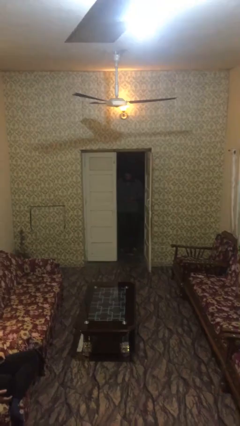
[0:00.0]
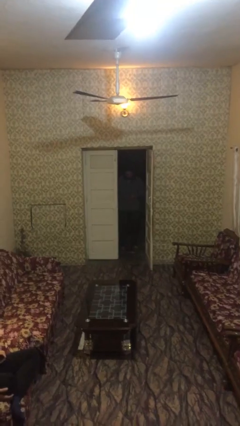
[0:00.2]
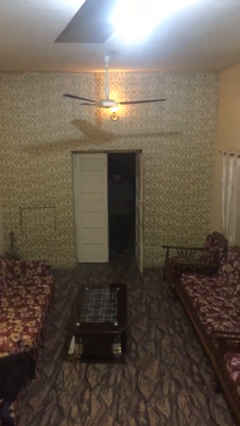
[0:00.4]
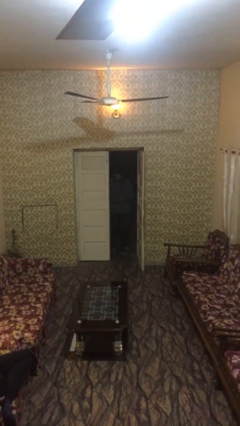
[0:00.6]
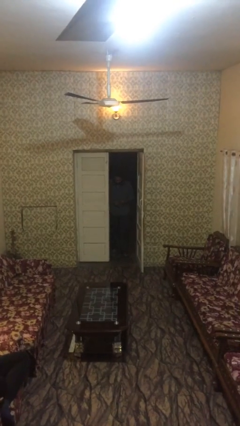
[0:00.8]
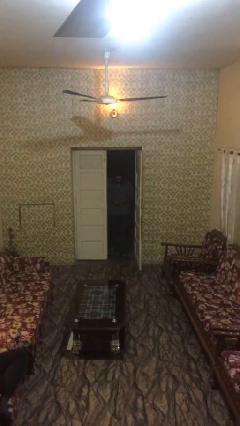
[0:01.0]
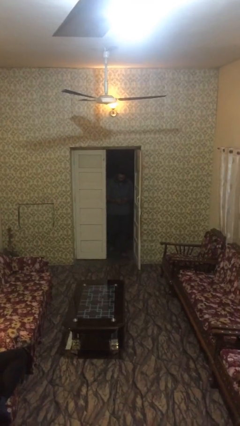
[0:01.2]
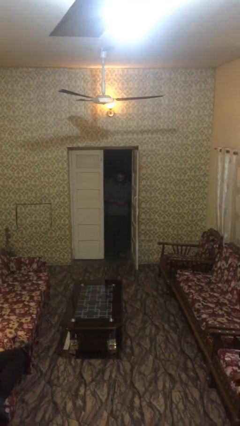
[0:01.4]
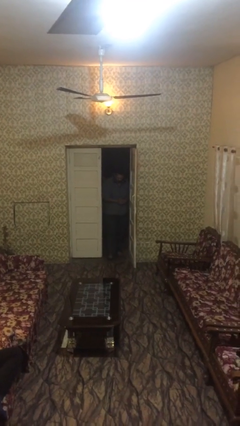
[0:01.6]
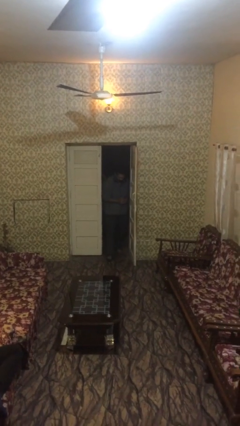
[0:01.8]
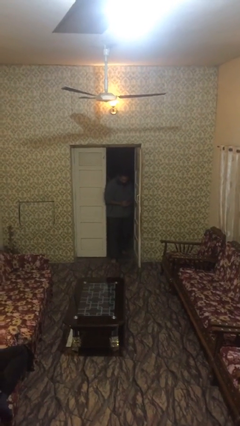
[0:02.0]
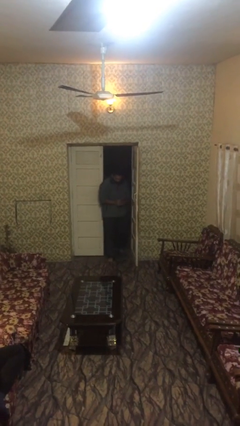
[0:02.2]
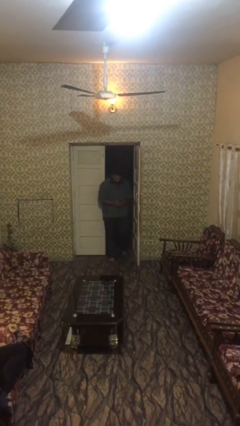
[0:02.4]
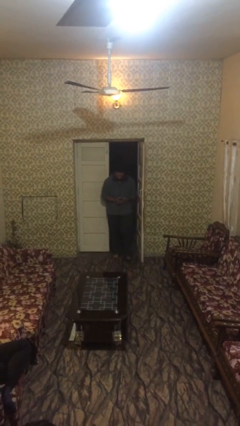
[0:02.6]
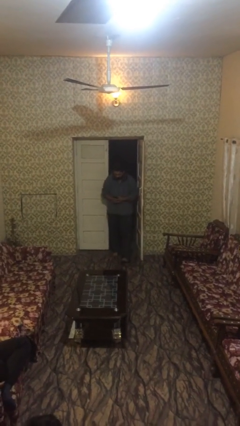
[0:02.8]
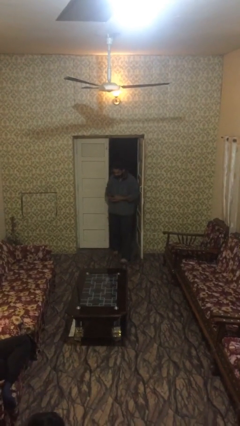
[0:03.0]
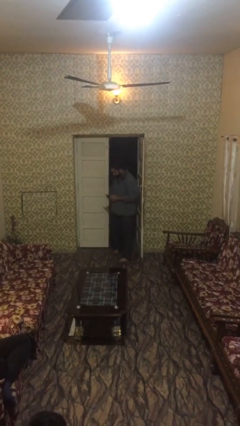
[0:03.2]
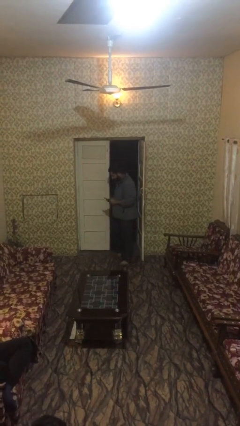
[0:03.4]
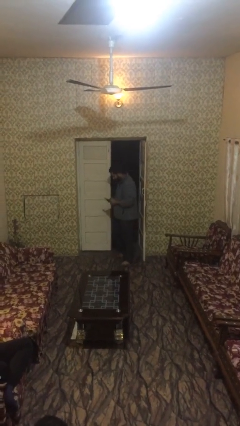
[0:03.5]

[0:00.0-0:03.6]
person enters scene through structure

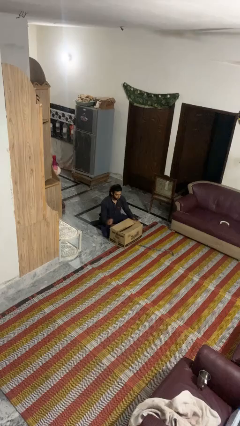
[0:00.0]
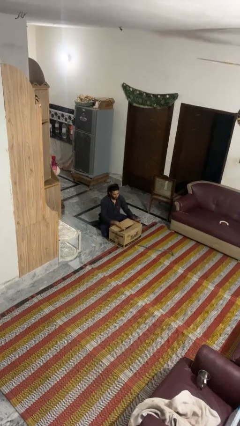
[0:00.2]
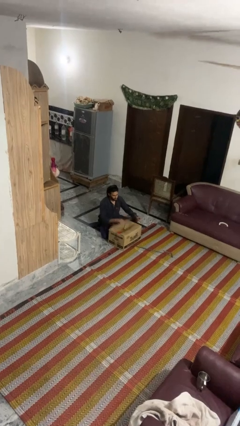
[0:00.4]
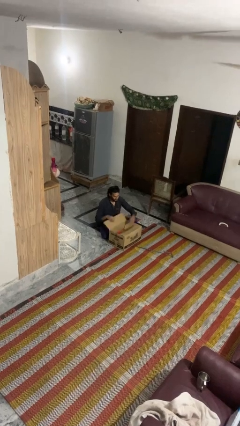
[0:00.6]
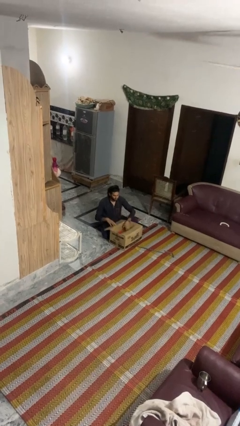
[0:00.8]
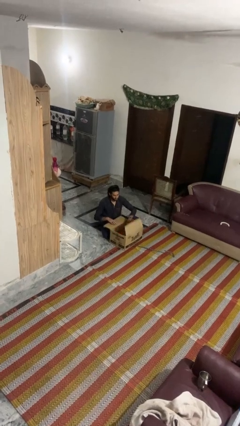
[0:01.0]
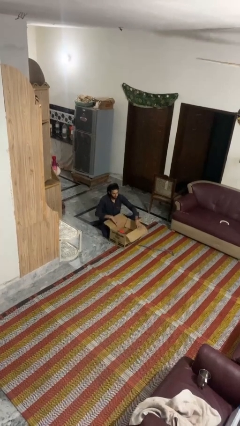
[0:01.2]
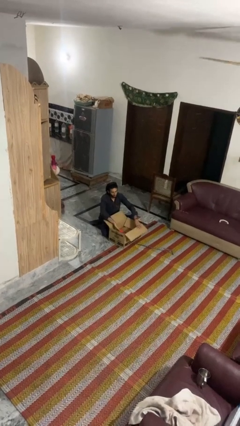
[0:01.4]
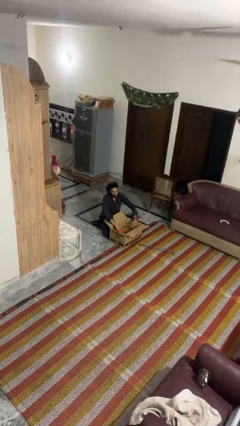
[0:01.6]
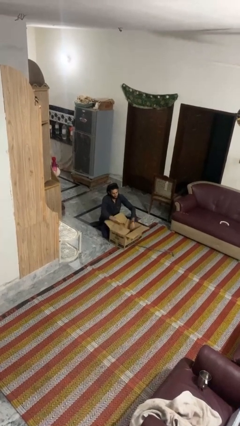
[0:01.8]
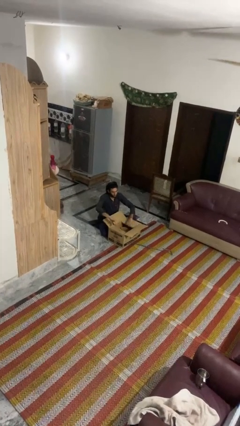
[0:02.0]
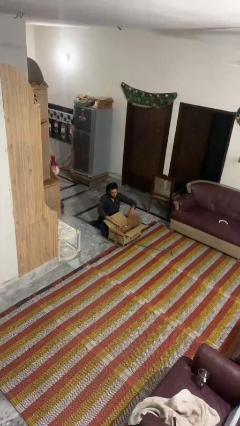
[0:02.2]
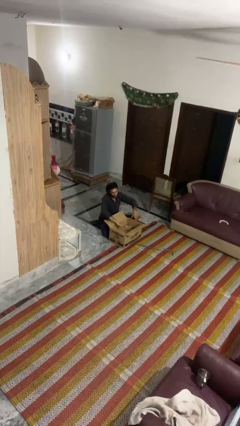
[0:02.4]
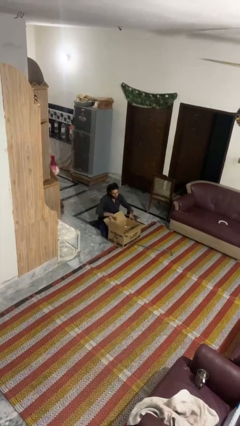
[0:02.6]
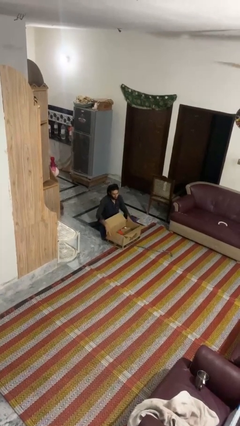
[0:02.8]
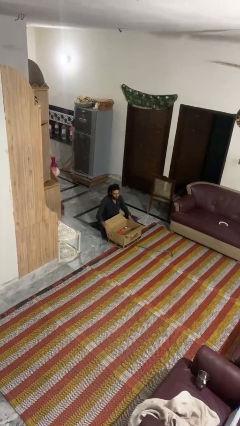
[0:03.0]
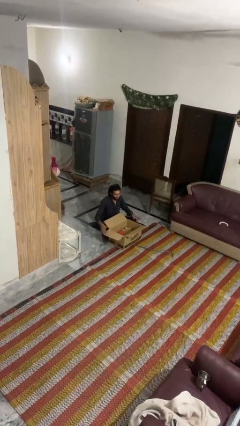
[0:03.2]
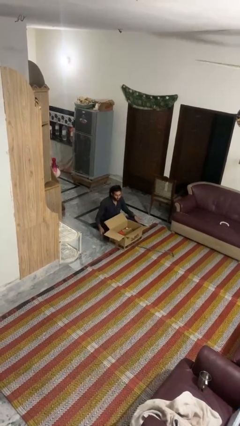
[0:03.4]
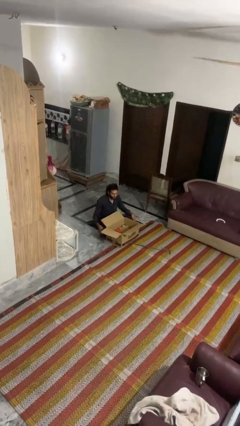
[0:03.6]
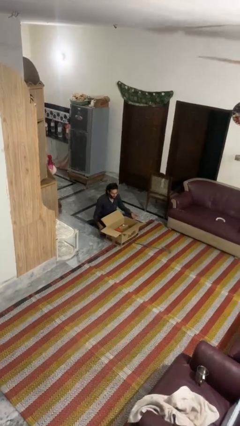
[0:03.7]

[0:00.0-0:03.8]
person opens box

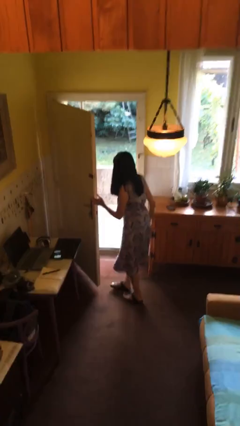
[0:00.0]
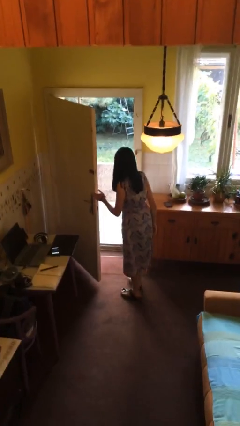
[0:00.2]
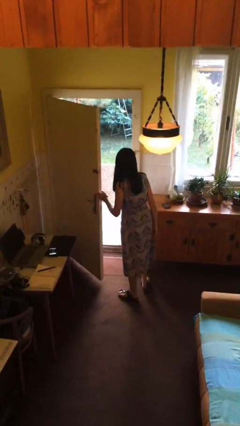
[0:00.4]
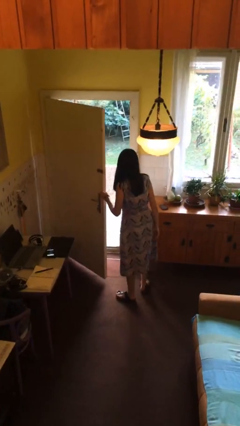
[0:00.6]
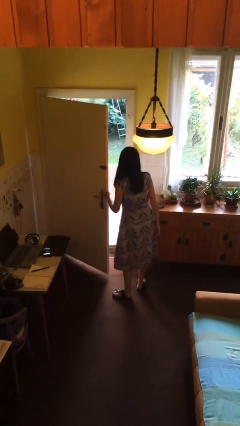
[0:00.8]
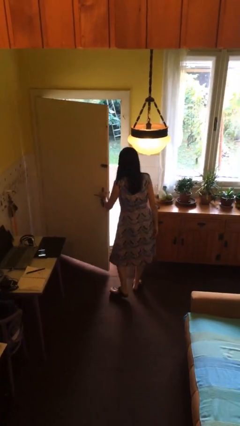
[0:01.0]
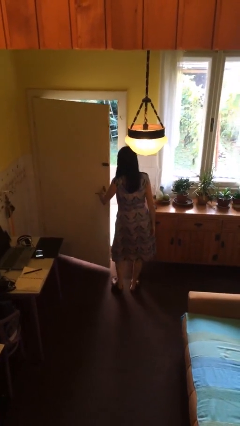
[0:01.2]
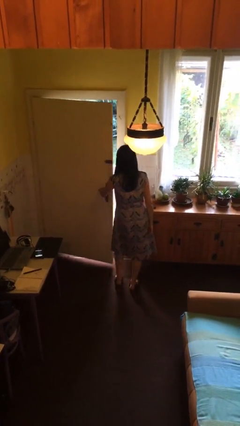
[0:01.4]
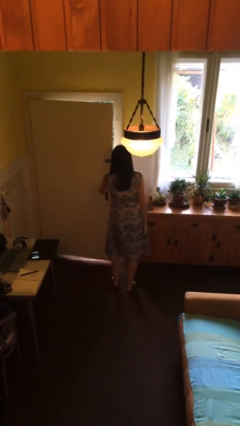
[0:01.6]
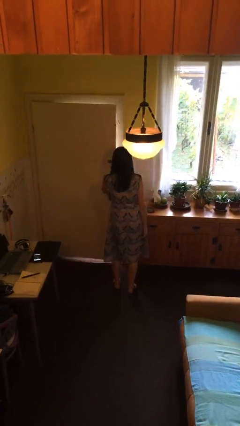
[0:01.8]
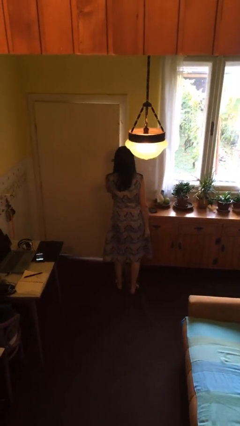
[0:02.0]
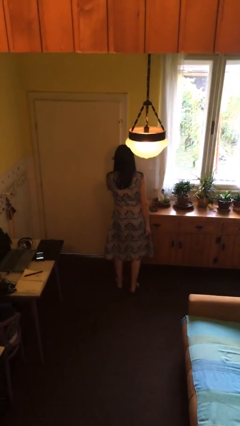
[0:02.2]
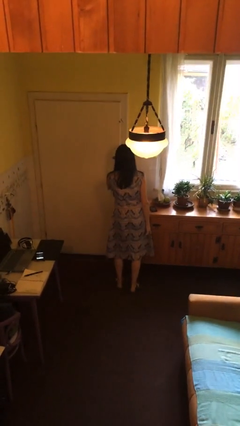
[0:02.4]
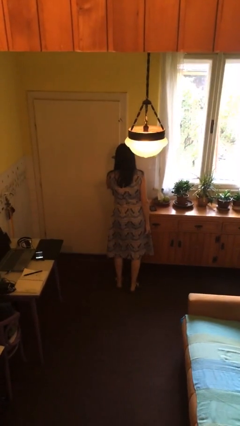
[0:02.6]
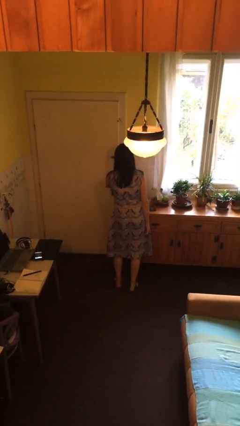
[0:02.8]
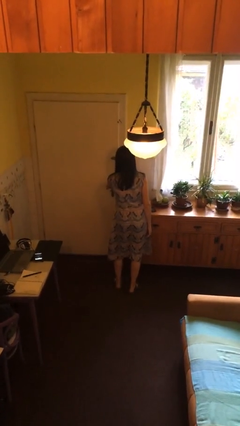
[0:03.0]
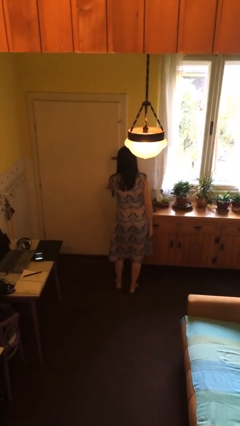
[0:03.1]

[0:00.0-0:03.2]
person closes facility door

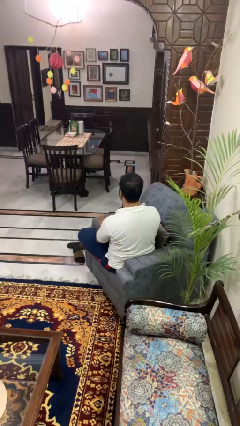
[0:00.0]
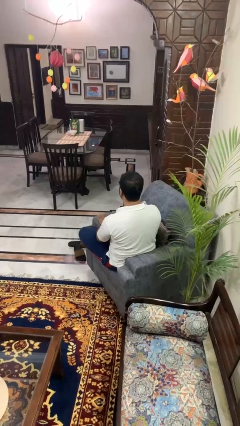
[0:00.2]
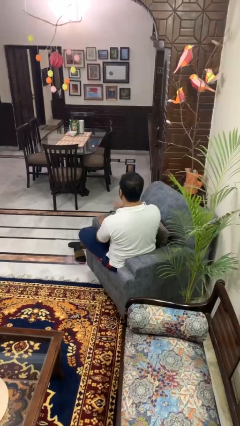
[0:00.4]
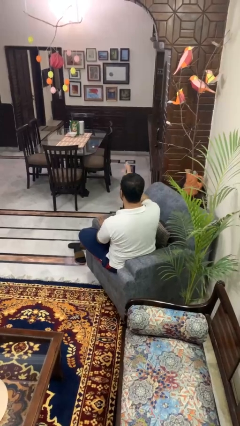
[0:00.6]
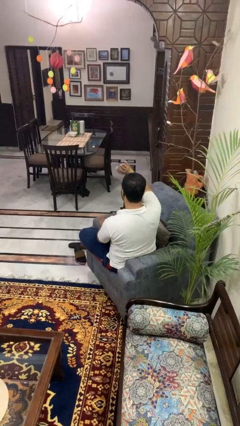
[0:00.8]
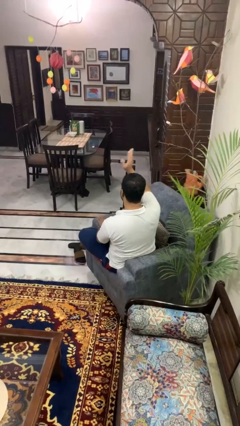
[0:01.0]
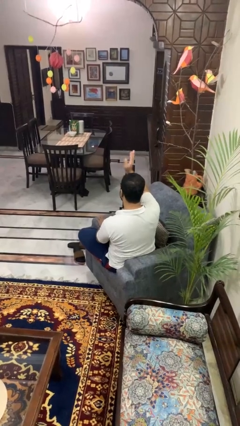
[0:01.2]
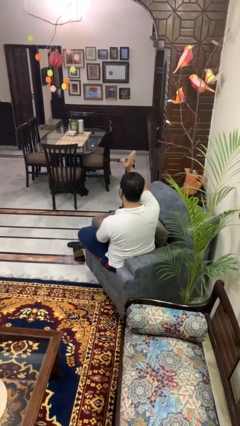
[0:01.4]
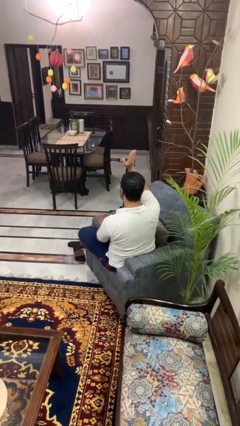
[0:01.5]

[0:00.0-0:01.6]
person waves at person

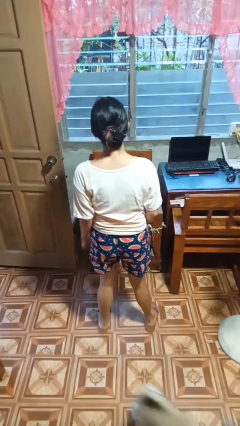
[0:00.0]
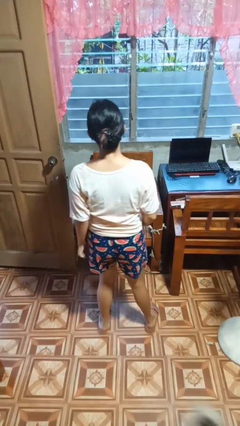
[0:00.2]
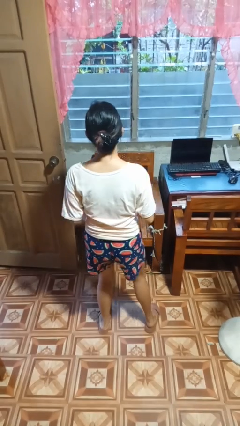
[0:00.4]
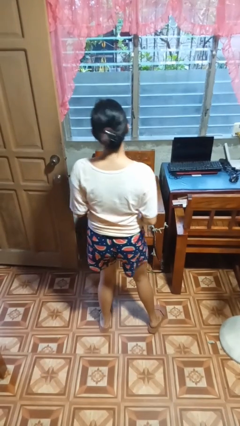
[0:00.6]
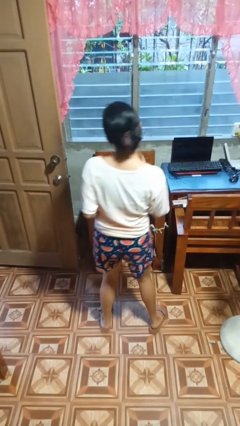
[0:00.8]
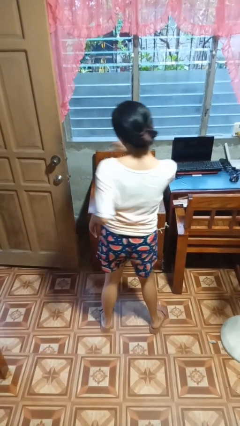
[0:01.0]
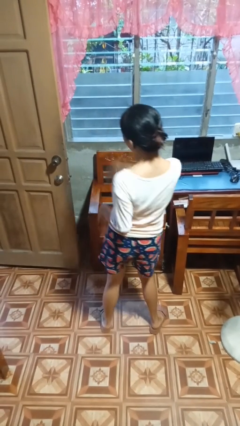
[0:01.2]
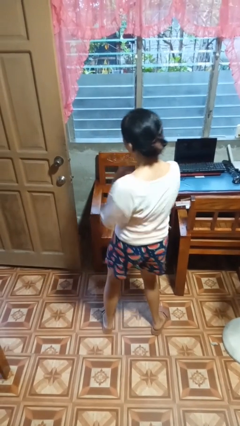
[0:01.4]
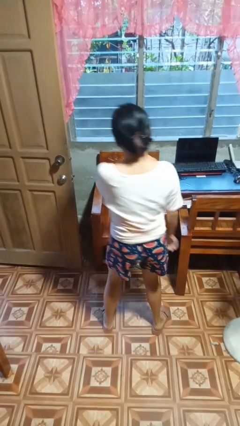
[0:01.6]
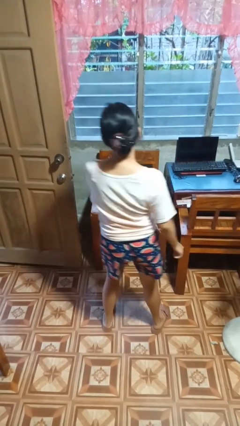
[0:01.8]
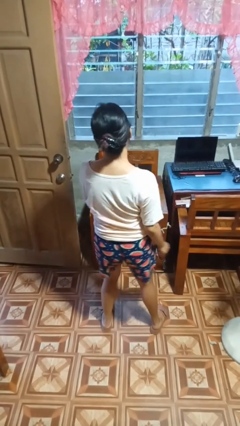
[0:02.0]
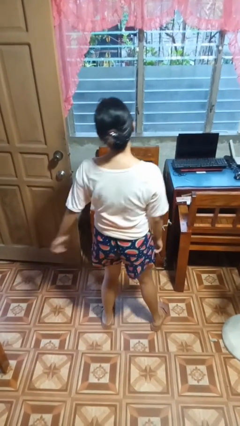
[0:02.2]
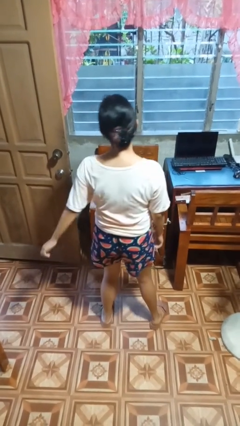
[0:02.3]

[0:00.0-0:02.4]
person dances in place

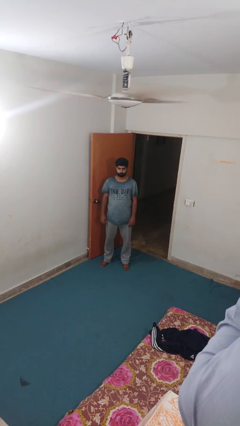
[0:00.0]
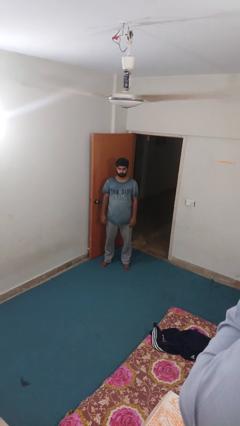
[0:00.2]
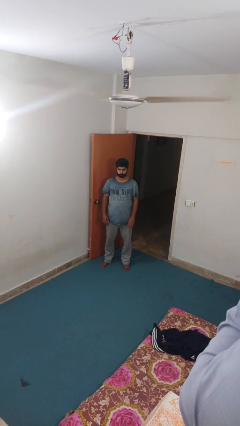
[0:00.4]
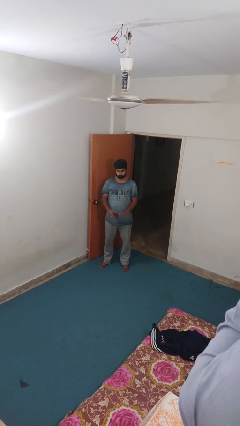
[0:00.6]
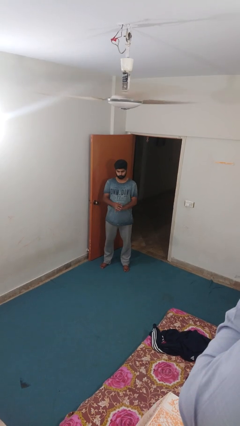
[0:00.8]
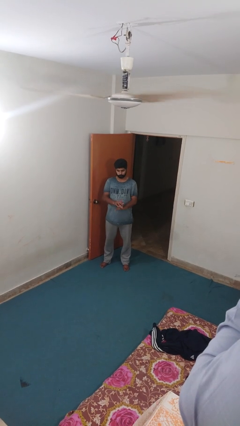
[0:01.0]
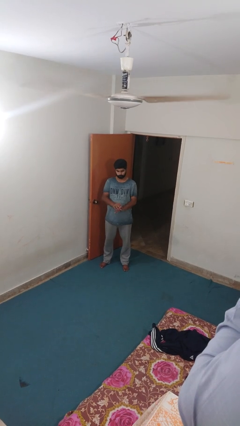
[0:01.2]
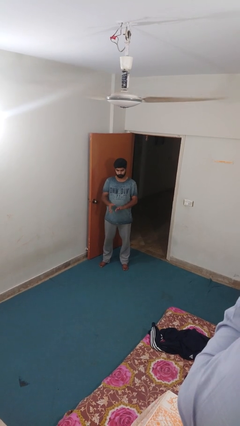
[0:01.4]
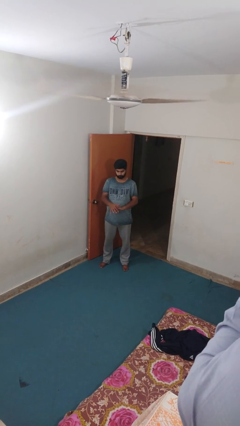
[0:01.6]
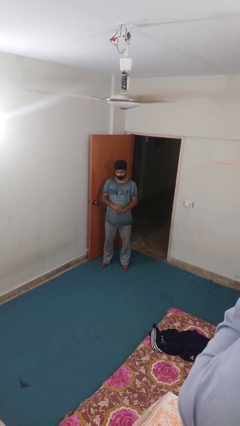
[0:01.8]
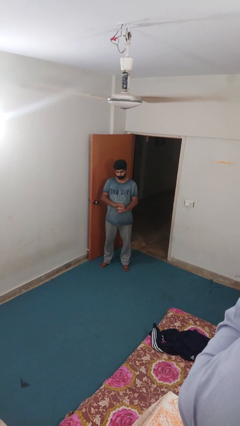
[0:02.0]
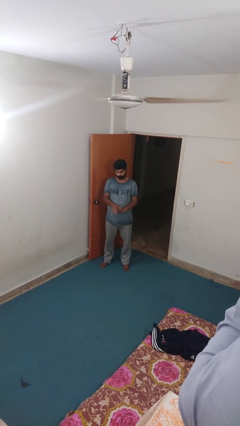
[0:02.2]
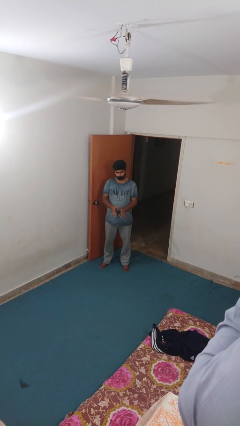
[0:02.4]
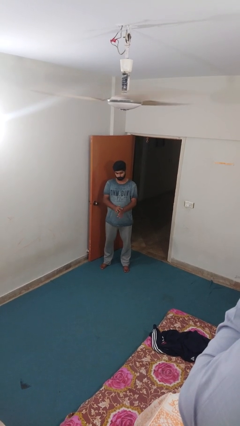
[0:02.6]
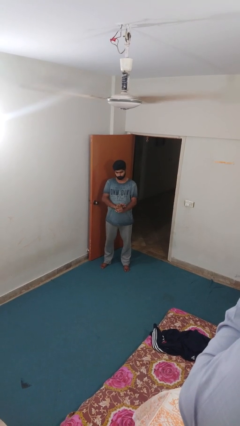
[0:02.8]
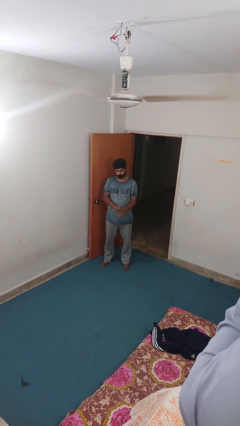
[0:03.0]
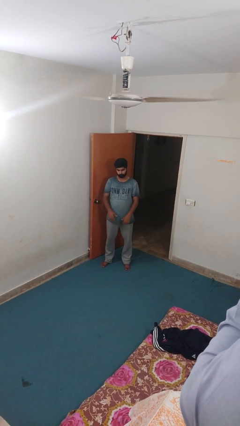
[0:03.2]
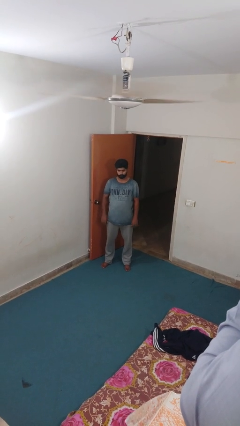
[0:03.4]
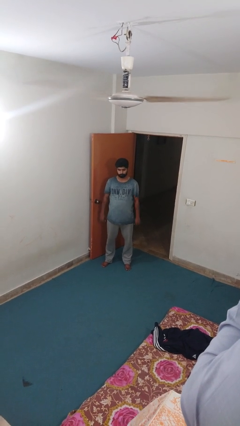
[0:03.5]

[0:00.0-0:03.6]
person snaps fingers
